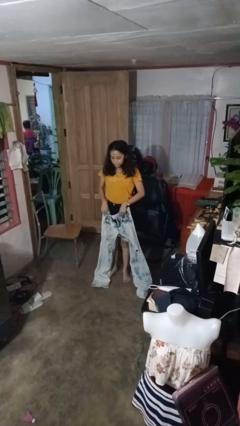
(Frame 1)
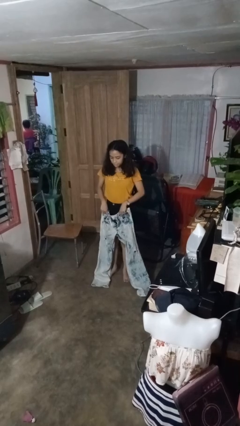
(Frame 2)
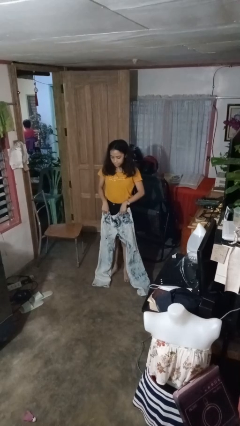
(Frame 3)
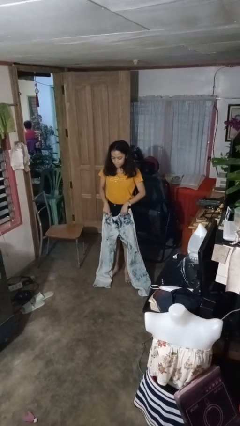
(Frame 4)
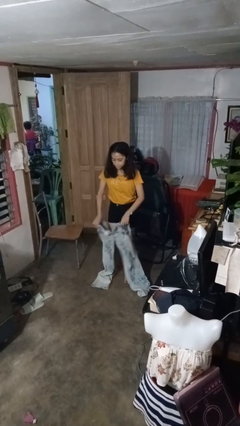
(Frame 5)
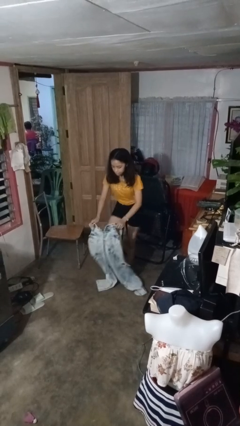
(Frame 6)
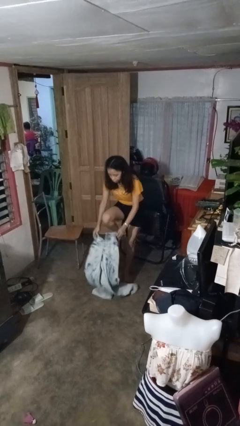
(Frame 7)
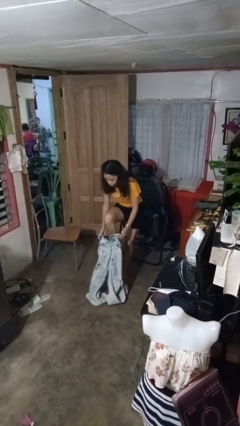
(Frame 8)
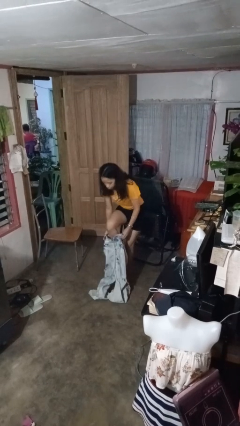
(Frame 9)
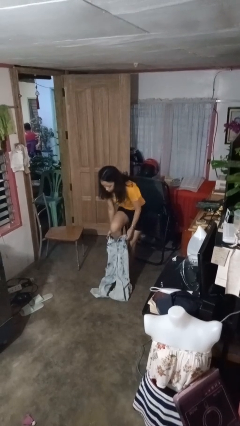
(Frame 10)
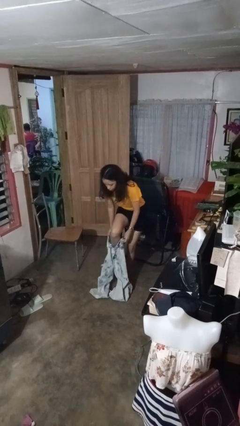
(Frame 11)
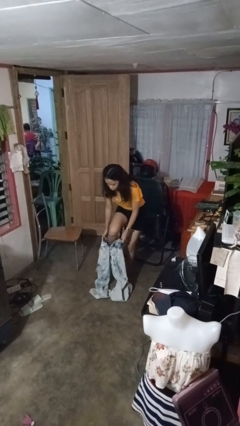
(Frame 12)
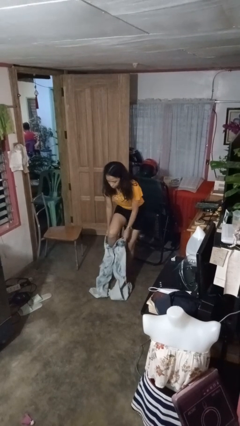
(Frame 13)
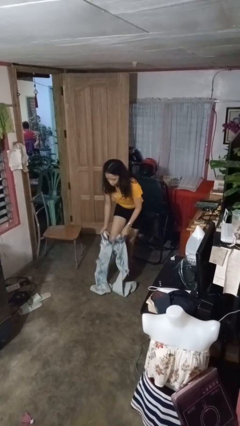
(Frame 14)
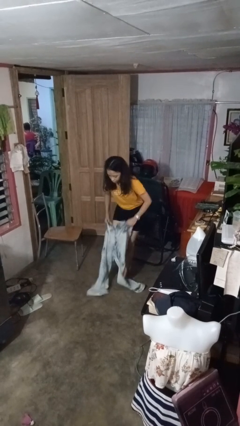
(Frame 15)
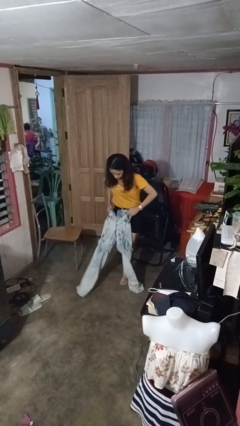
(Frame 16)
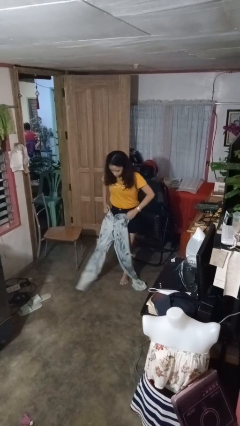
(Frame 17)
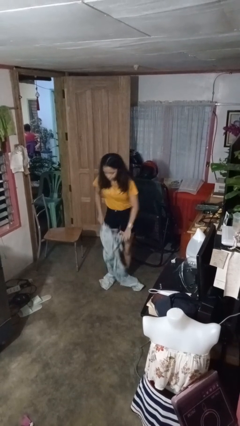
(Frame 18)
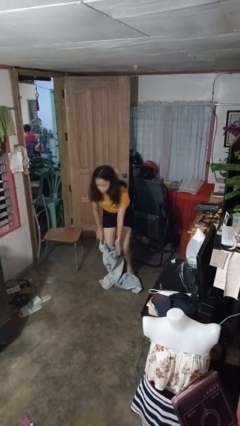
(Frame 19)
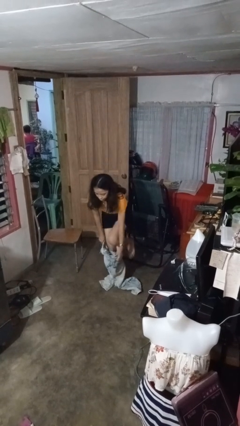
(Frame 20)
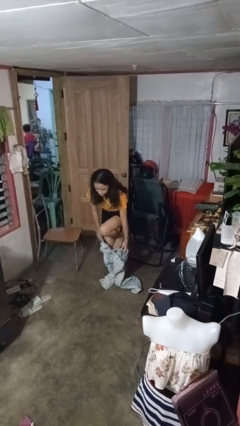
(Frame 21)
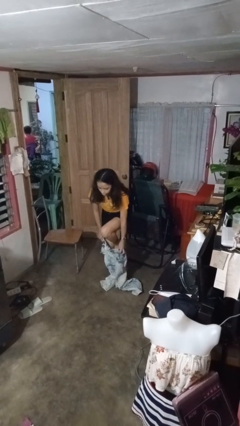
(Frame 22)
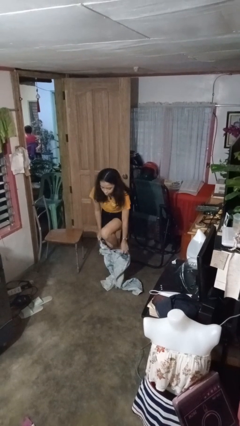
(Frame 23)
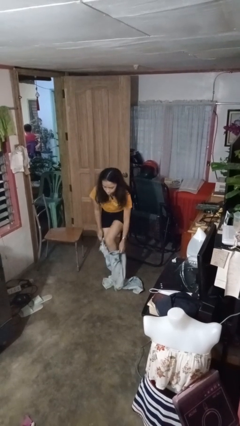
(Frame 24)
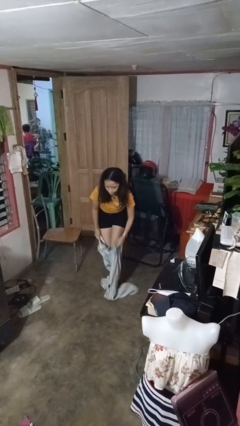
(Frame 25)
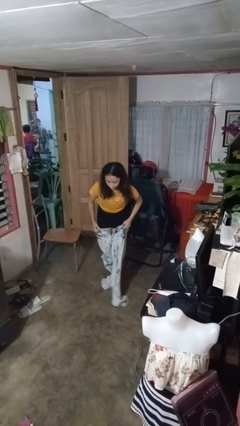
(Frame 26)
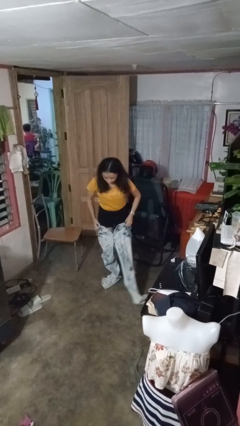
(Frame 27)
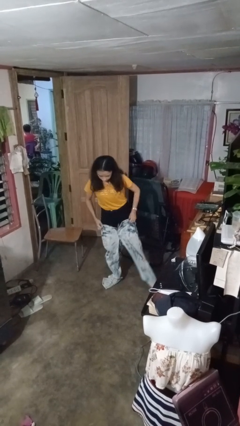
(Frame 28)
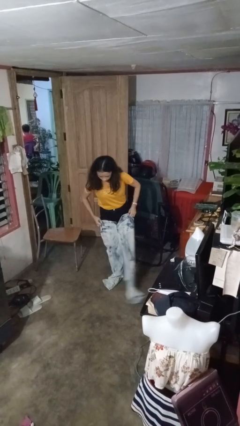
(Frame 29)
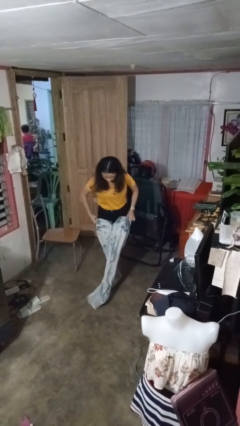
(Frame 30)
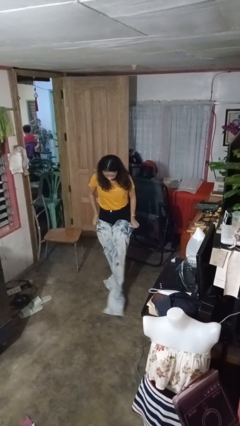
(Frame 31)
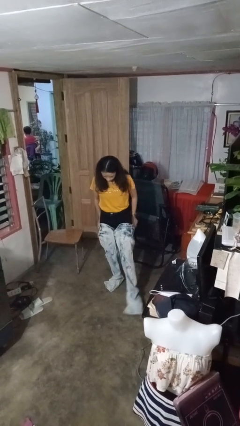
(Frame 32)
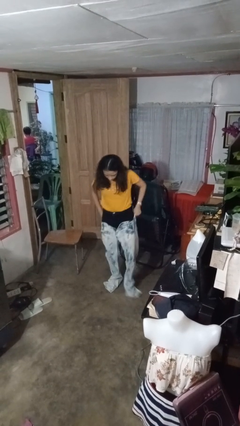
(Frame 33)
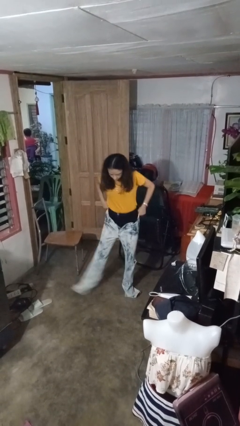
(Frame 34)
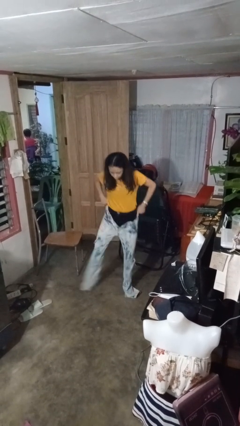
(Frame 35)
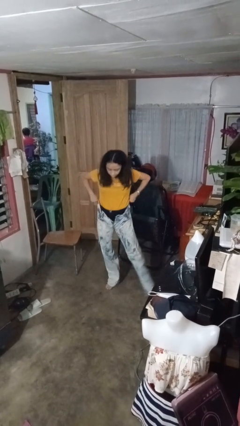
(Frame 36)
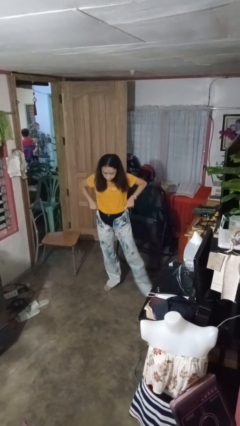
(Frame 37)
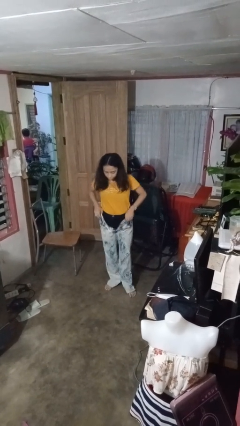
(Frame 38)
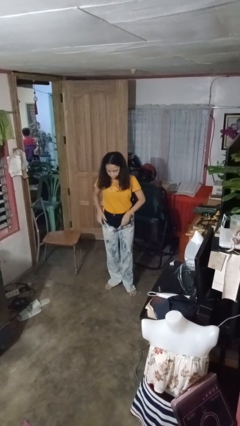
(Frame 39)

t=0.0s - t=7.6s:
person puts on pants

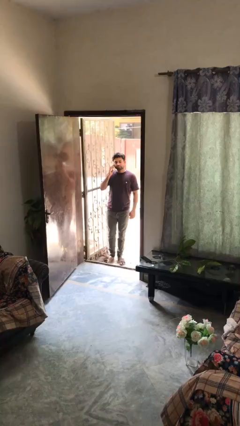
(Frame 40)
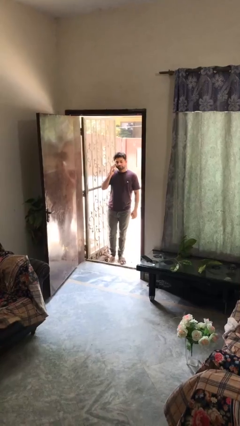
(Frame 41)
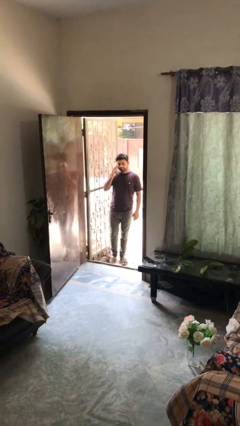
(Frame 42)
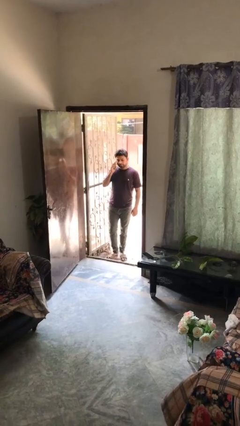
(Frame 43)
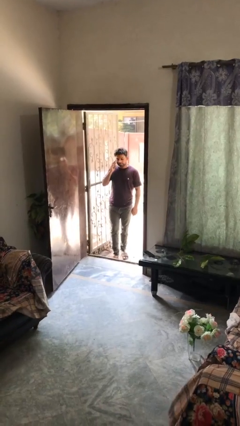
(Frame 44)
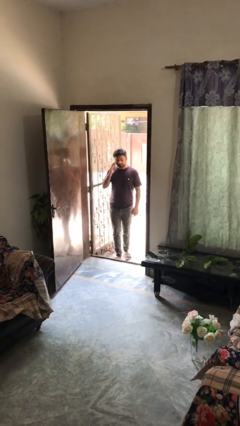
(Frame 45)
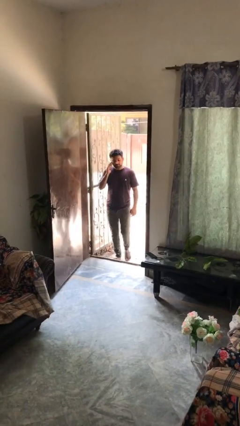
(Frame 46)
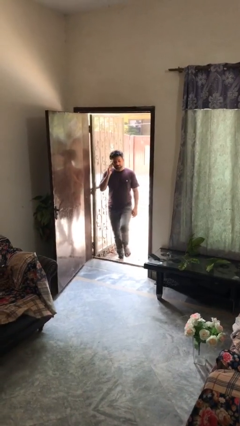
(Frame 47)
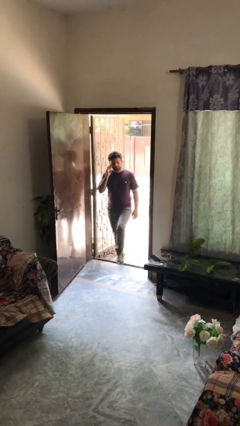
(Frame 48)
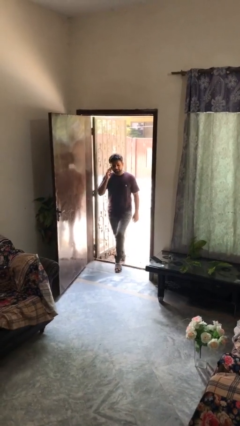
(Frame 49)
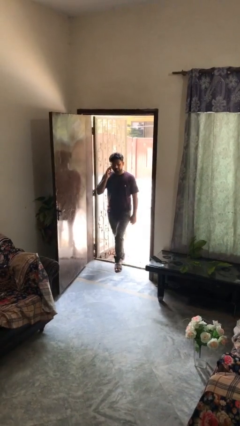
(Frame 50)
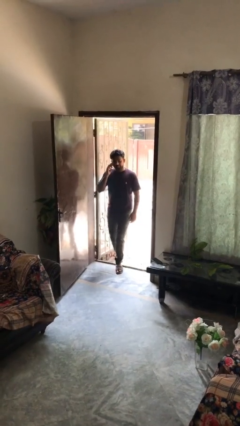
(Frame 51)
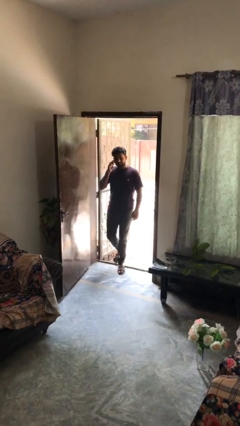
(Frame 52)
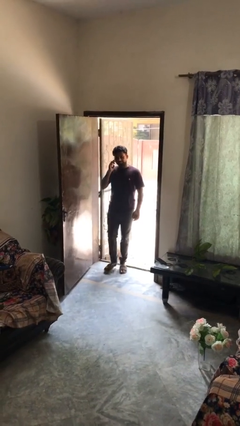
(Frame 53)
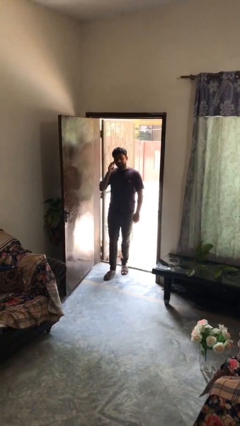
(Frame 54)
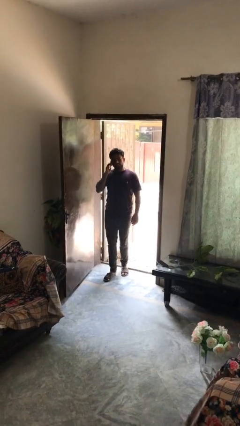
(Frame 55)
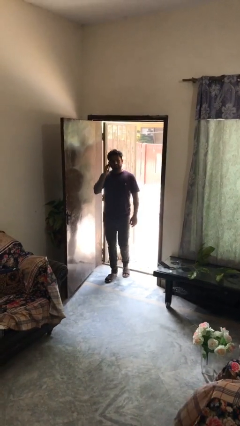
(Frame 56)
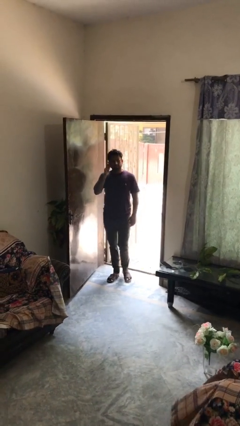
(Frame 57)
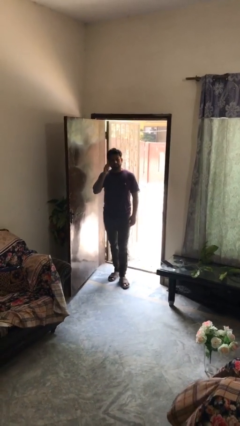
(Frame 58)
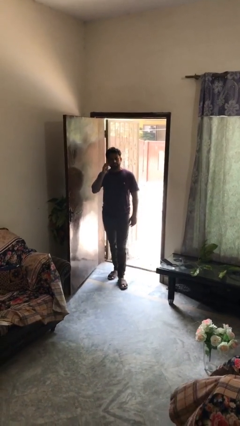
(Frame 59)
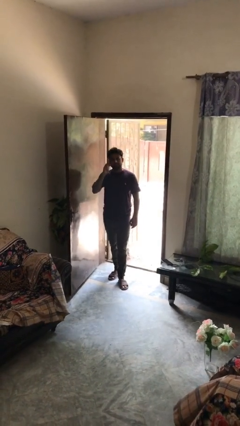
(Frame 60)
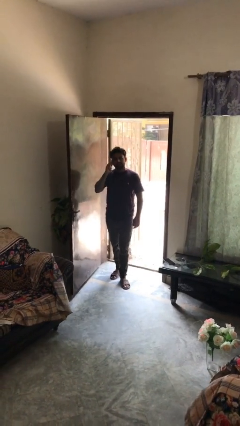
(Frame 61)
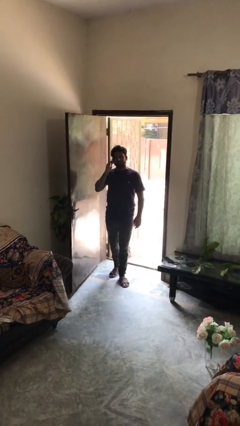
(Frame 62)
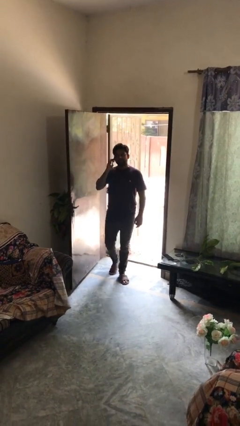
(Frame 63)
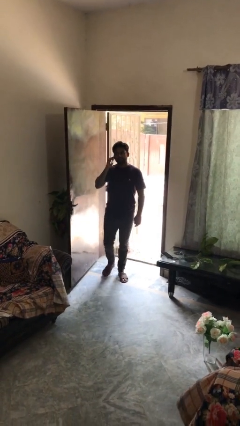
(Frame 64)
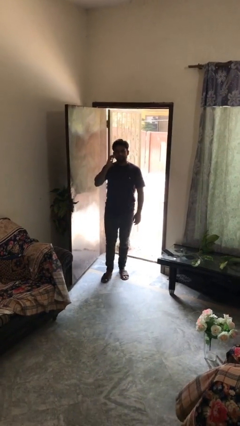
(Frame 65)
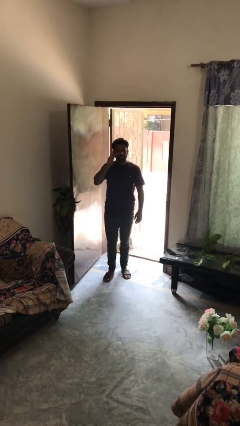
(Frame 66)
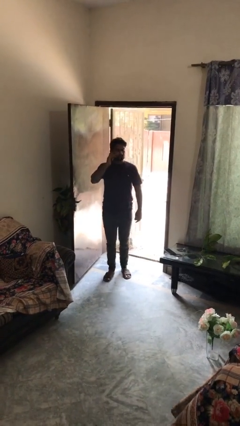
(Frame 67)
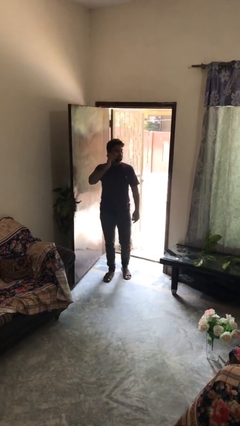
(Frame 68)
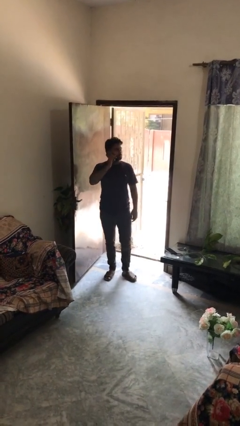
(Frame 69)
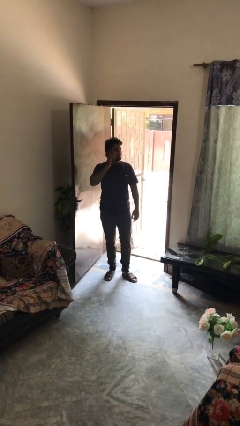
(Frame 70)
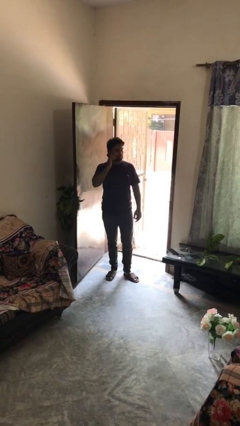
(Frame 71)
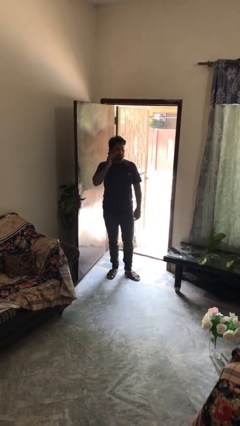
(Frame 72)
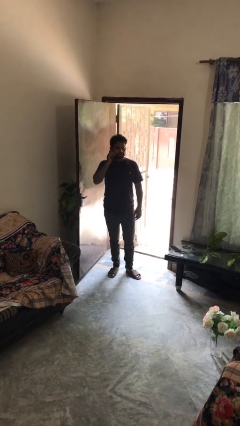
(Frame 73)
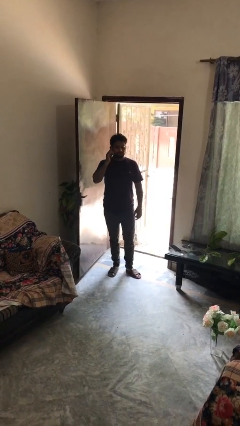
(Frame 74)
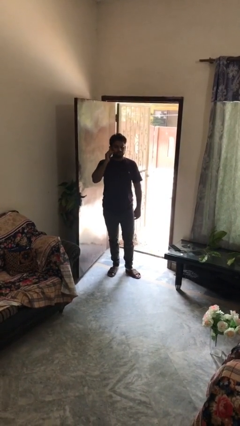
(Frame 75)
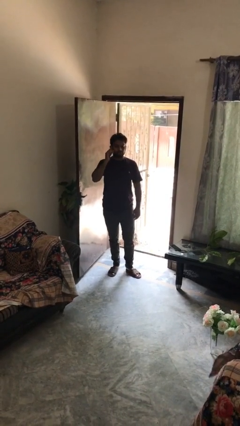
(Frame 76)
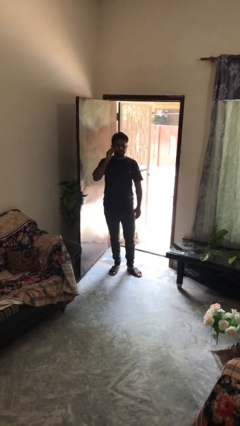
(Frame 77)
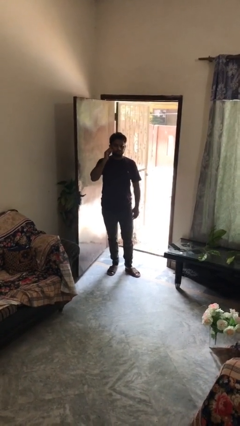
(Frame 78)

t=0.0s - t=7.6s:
person enters scene through structure

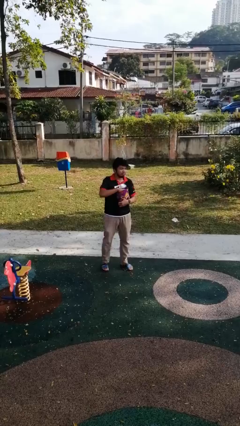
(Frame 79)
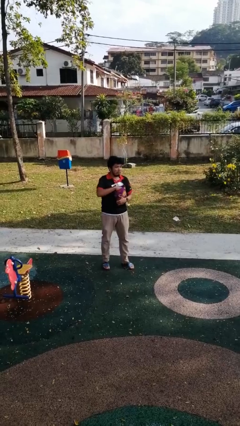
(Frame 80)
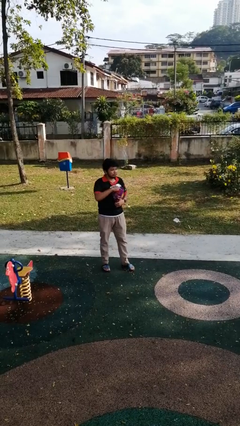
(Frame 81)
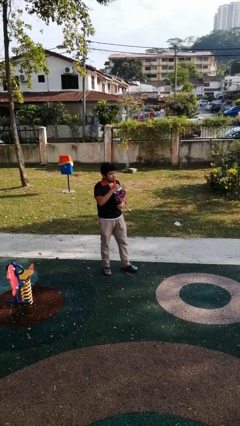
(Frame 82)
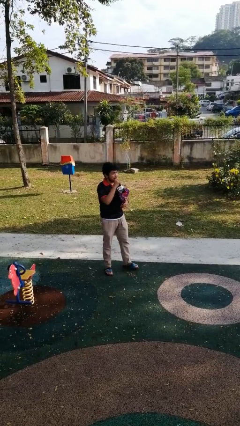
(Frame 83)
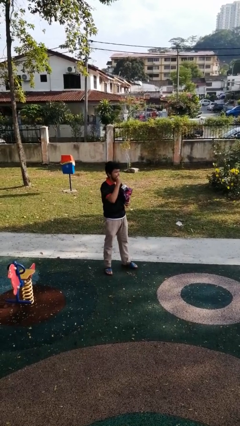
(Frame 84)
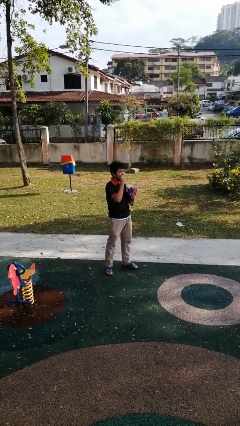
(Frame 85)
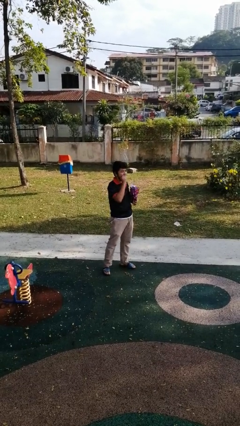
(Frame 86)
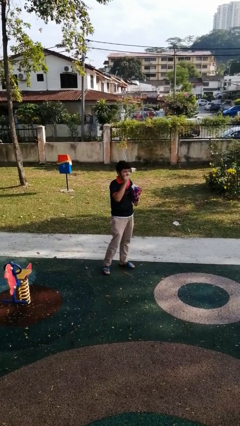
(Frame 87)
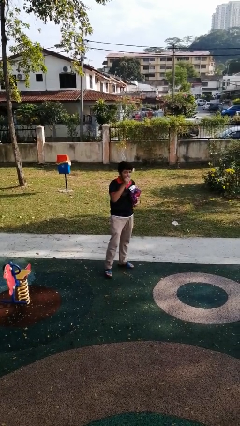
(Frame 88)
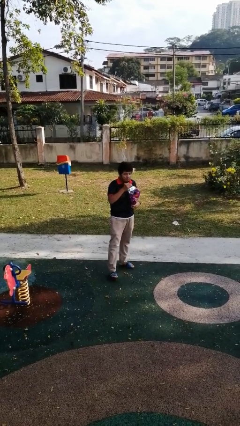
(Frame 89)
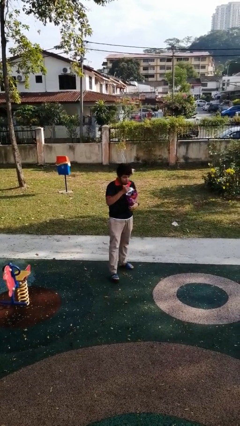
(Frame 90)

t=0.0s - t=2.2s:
person eats snack from bag

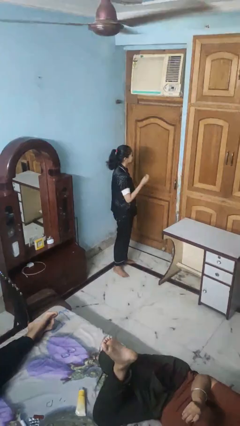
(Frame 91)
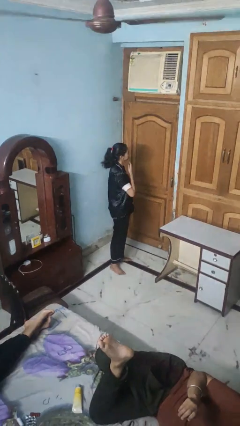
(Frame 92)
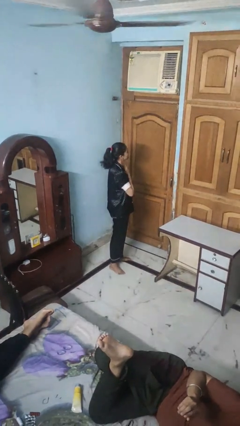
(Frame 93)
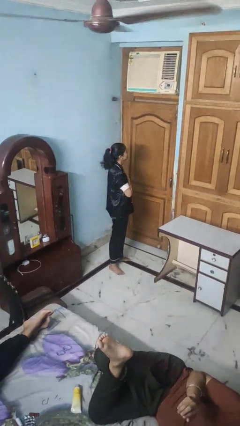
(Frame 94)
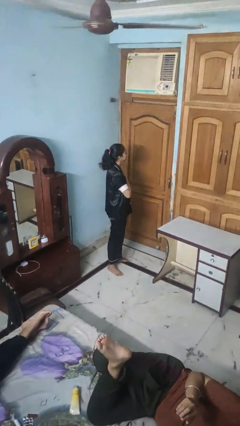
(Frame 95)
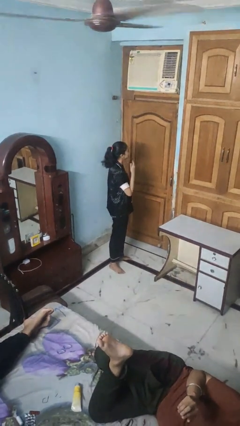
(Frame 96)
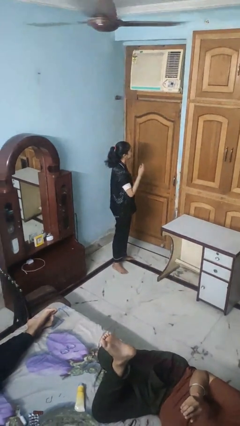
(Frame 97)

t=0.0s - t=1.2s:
person drums on chest
